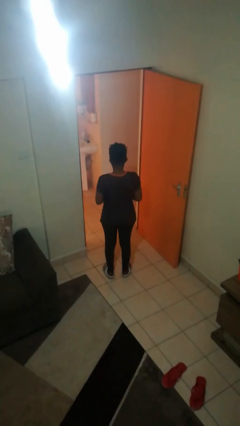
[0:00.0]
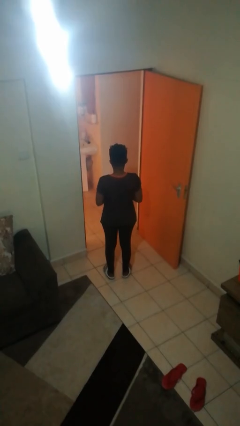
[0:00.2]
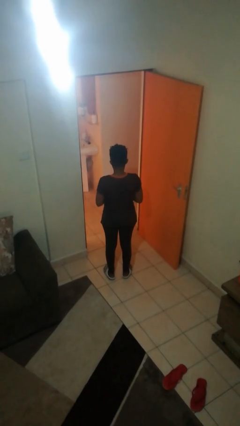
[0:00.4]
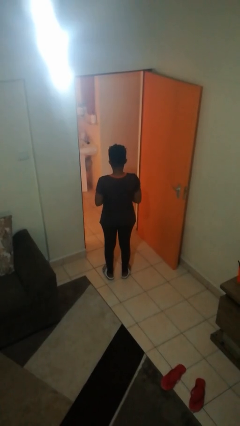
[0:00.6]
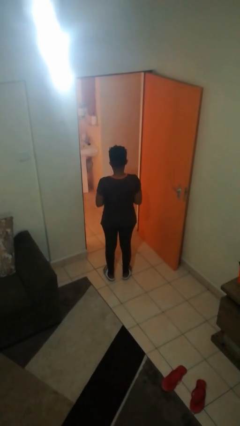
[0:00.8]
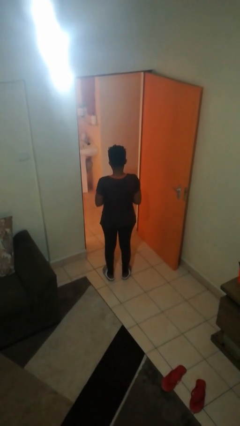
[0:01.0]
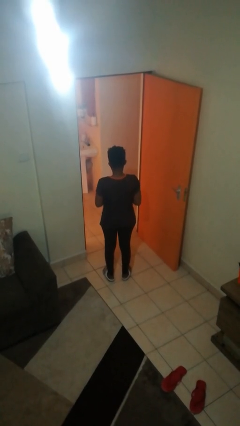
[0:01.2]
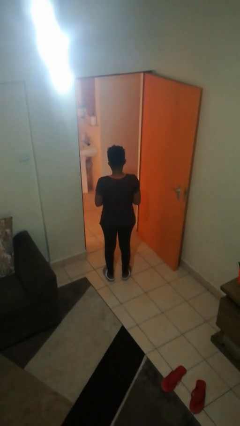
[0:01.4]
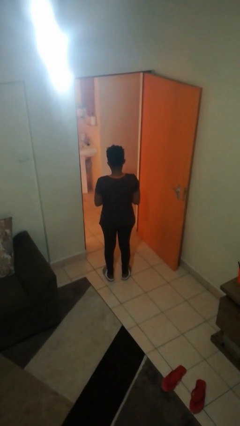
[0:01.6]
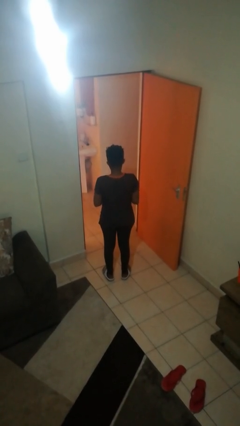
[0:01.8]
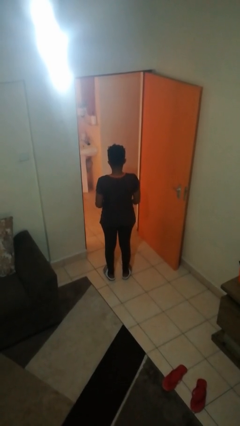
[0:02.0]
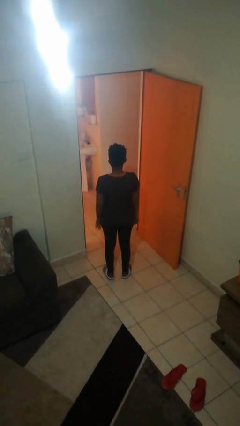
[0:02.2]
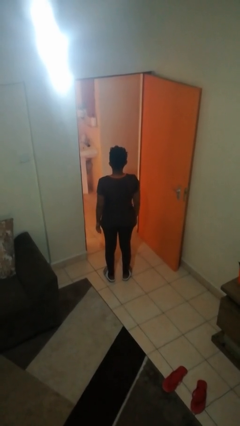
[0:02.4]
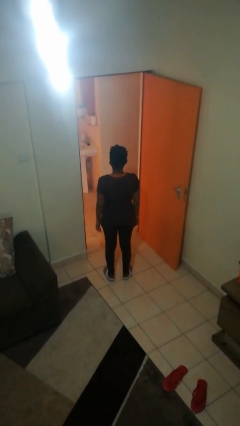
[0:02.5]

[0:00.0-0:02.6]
person takes off ring

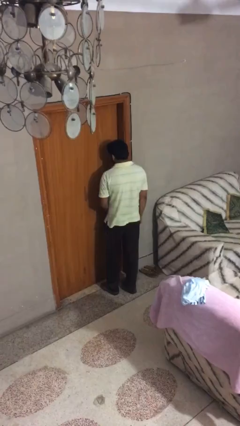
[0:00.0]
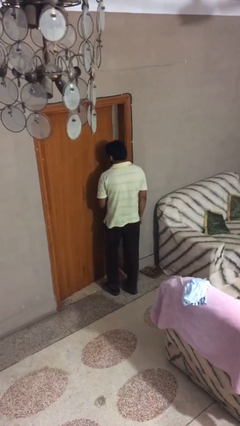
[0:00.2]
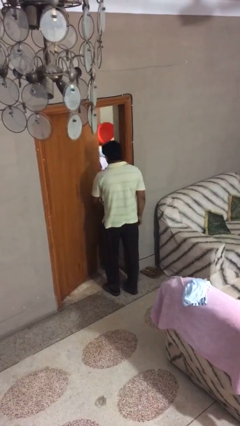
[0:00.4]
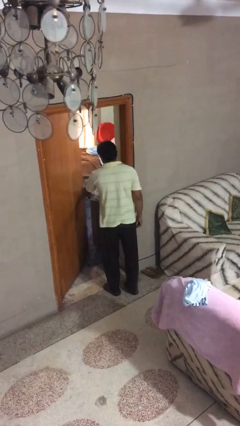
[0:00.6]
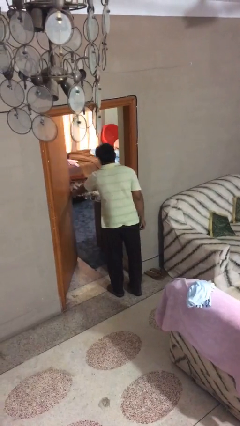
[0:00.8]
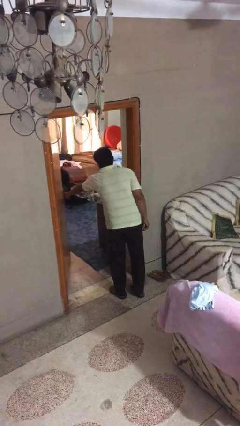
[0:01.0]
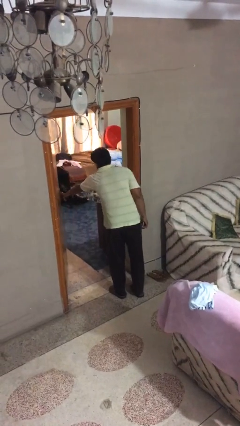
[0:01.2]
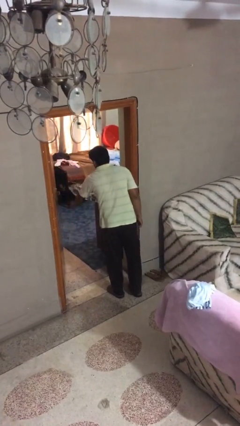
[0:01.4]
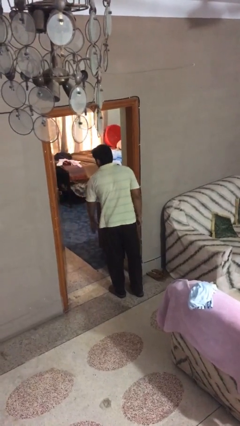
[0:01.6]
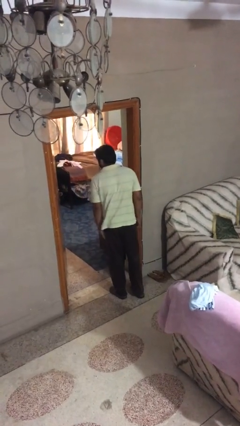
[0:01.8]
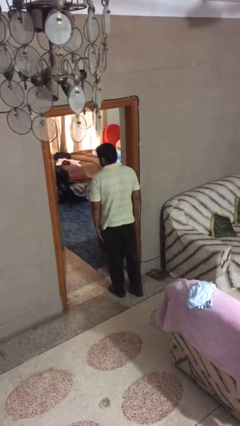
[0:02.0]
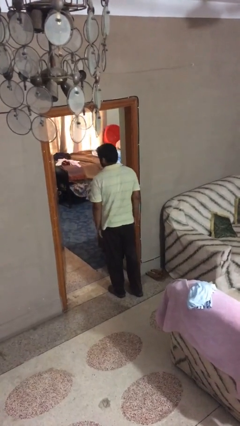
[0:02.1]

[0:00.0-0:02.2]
person opens facility door

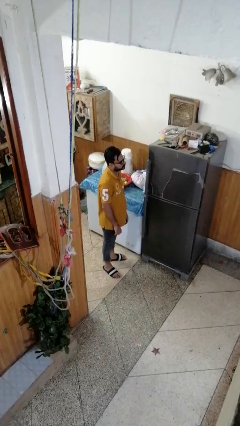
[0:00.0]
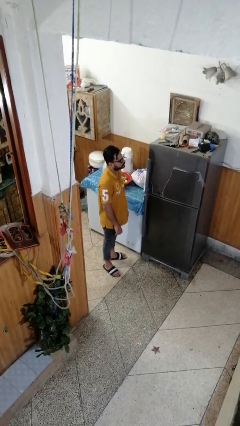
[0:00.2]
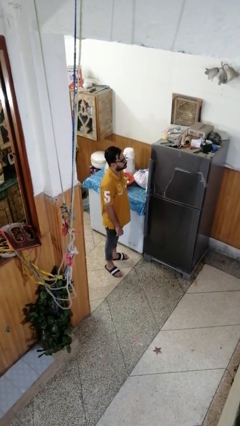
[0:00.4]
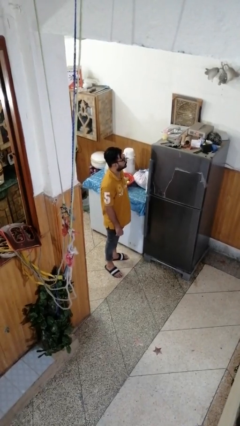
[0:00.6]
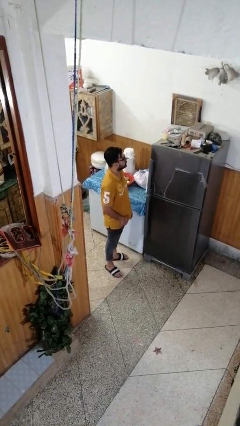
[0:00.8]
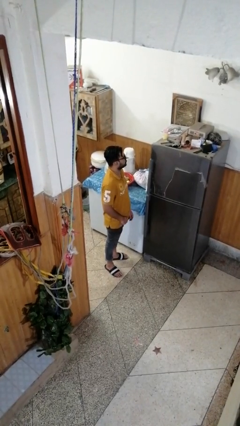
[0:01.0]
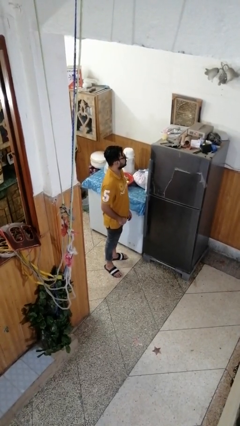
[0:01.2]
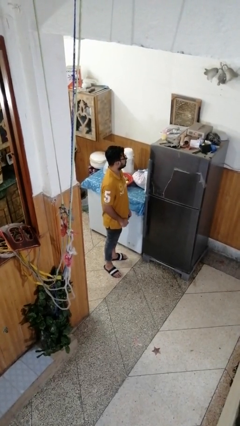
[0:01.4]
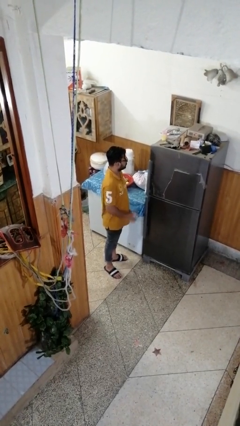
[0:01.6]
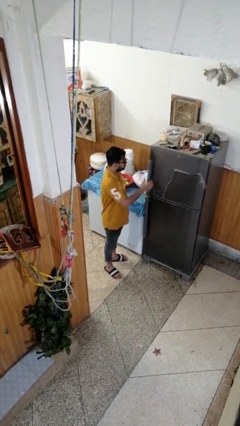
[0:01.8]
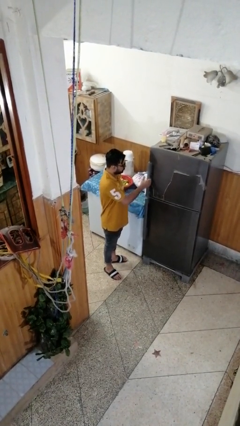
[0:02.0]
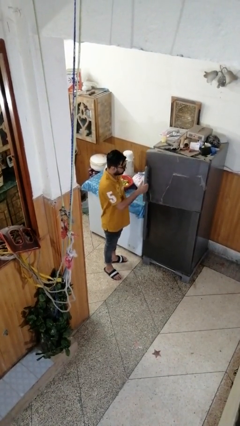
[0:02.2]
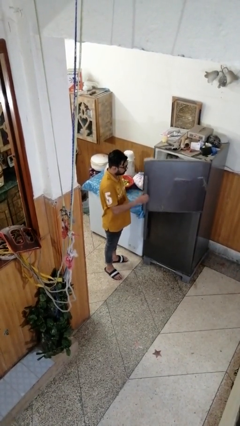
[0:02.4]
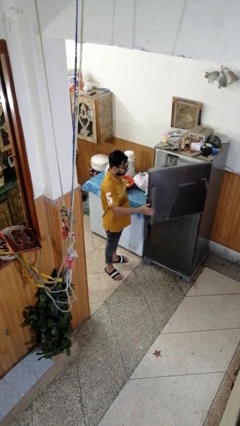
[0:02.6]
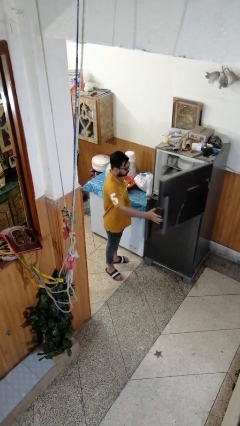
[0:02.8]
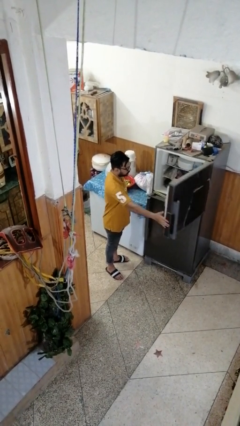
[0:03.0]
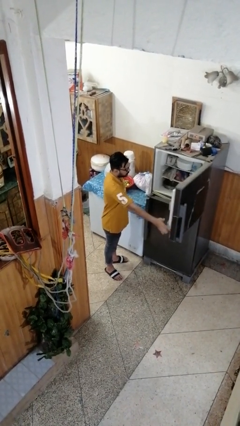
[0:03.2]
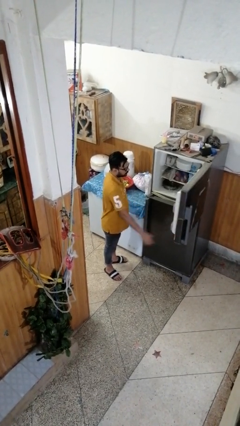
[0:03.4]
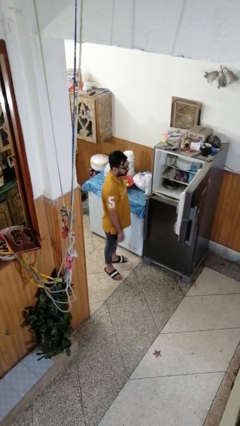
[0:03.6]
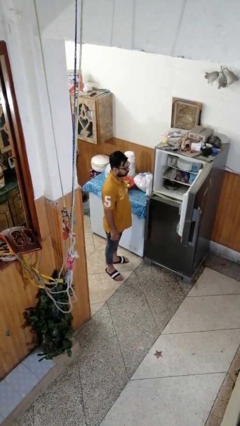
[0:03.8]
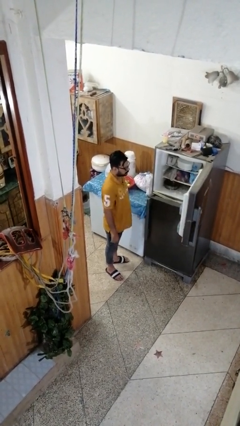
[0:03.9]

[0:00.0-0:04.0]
person opens refrigerator

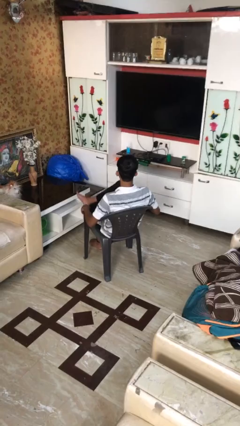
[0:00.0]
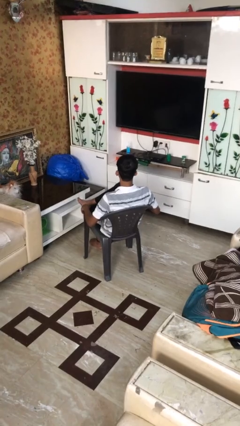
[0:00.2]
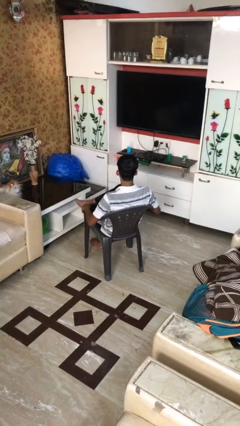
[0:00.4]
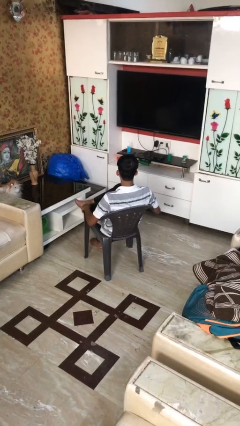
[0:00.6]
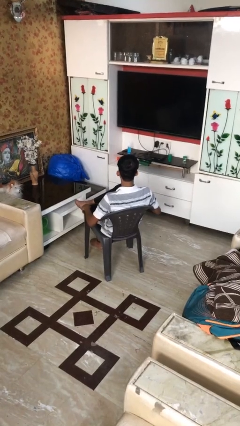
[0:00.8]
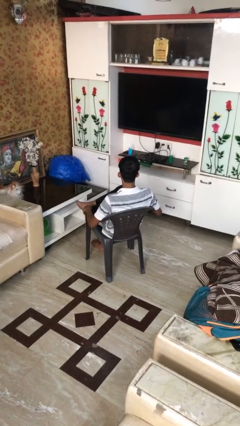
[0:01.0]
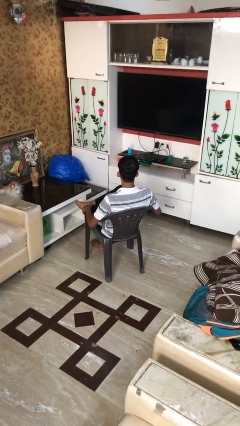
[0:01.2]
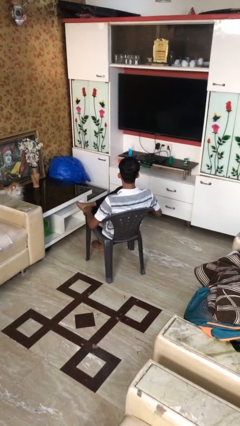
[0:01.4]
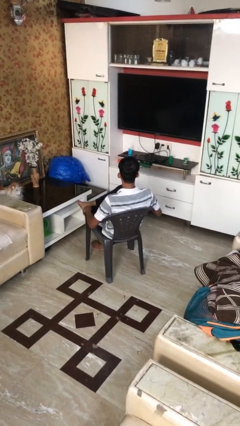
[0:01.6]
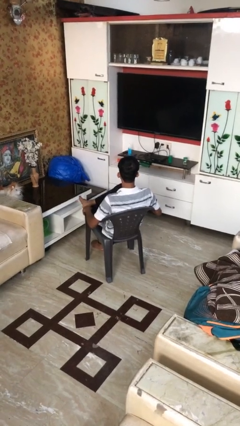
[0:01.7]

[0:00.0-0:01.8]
person crosses legs

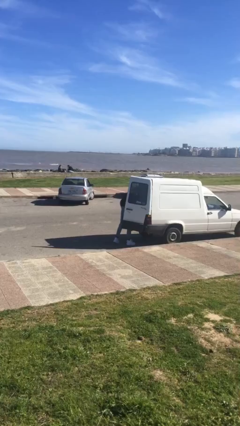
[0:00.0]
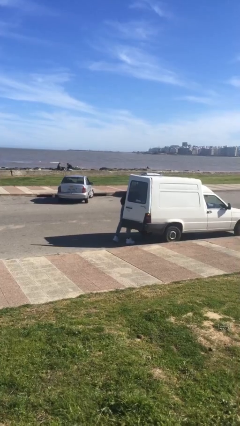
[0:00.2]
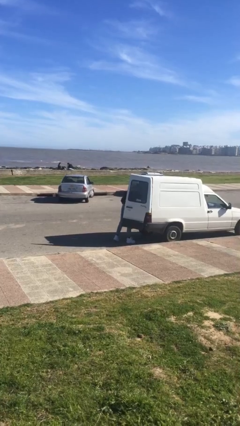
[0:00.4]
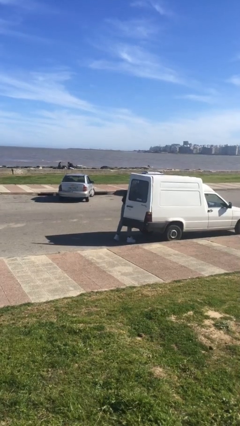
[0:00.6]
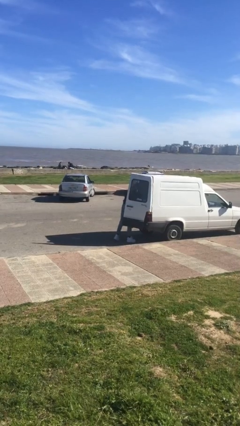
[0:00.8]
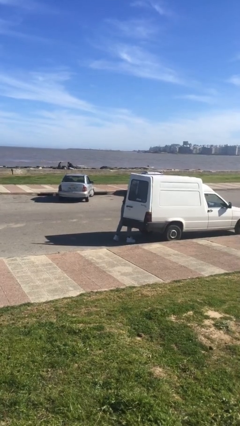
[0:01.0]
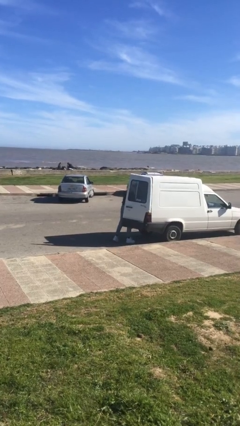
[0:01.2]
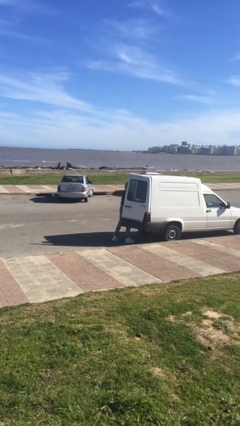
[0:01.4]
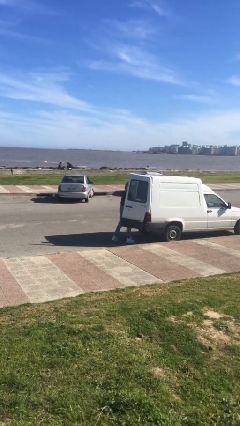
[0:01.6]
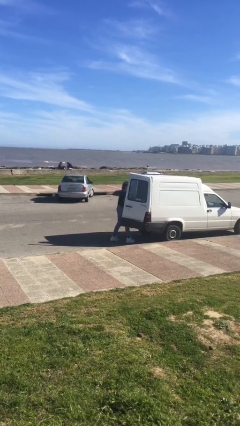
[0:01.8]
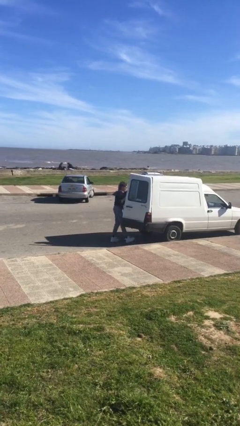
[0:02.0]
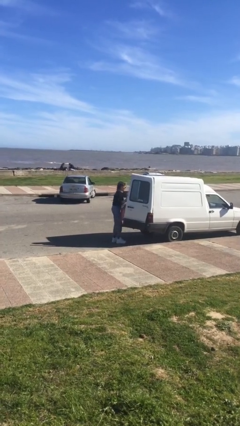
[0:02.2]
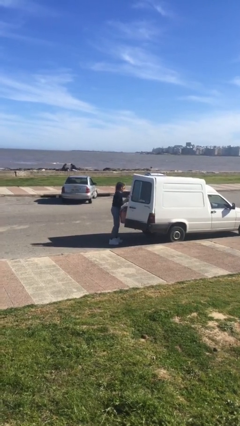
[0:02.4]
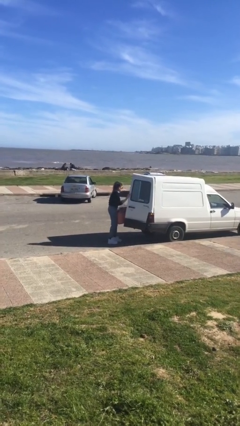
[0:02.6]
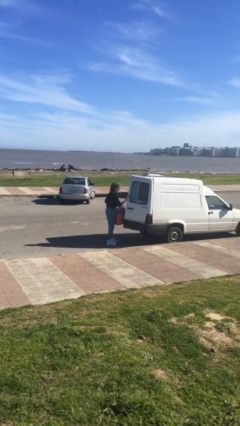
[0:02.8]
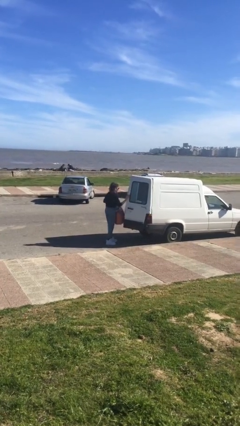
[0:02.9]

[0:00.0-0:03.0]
person unloads car

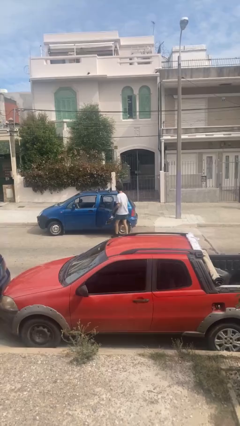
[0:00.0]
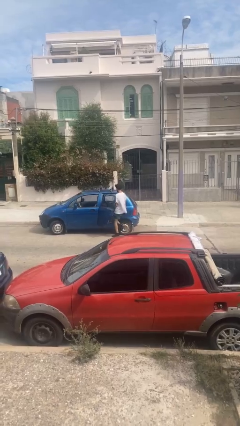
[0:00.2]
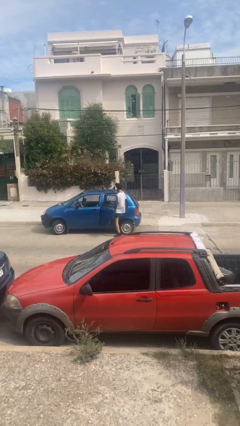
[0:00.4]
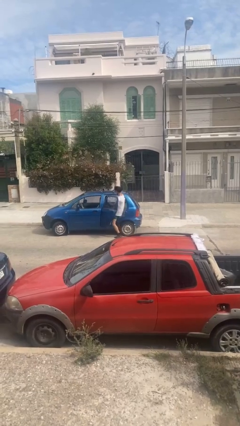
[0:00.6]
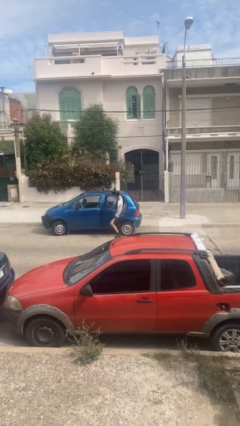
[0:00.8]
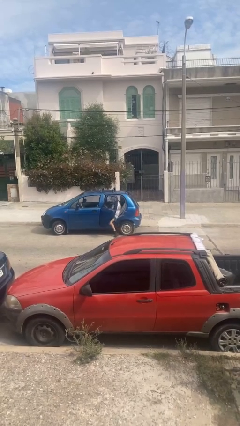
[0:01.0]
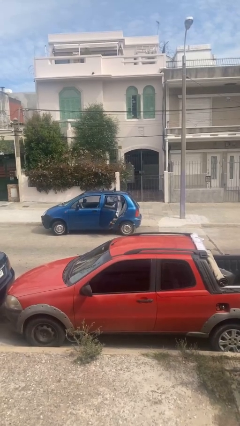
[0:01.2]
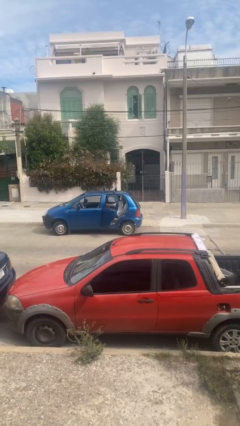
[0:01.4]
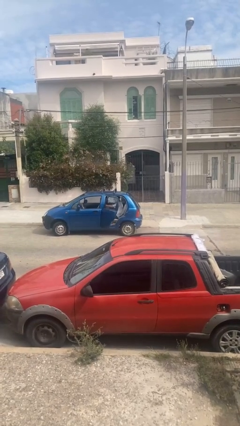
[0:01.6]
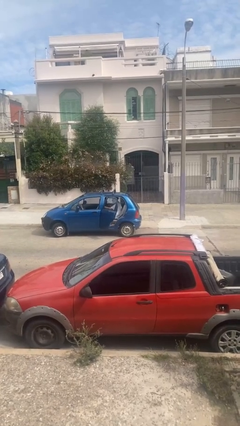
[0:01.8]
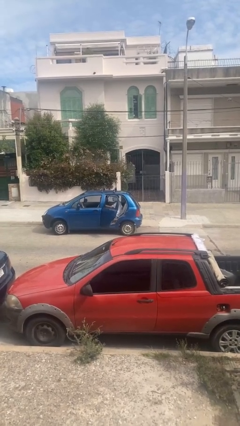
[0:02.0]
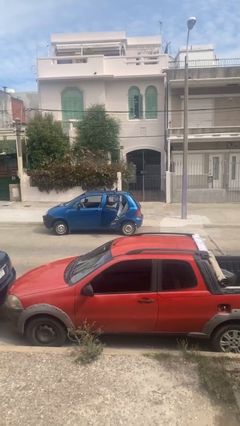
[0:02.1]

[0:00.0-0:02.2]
person enters car

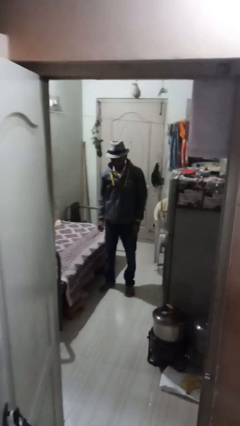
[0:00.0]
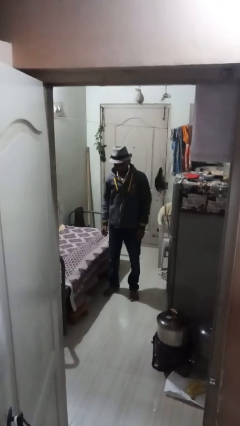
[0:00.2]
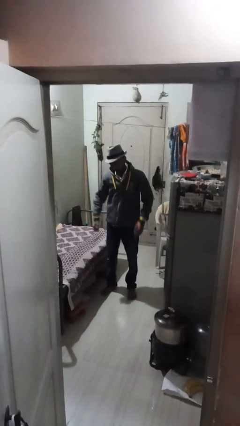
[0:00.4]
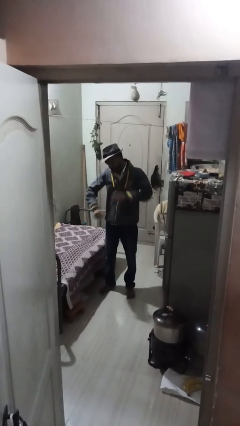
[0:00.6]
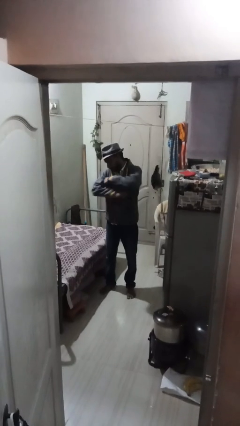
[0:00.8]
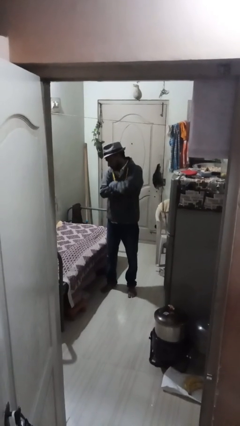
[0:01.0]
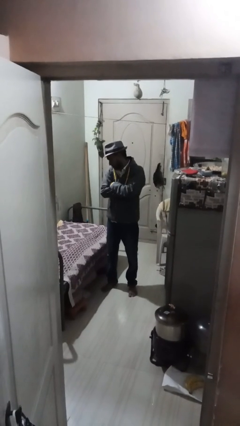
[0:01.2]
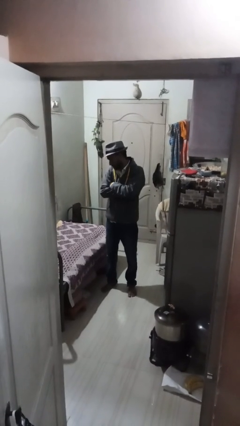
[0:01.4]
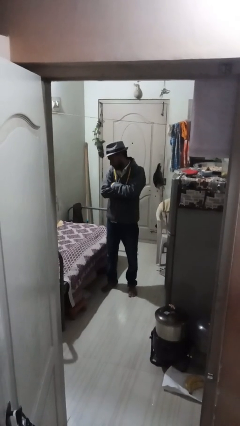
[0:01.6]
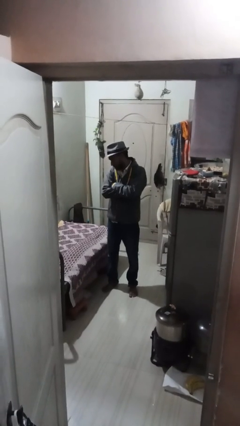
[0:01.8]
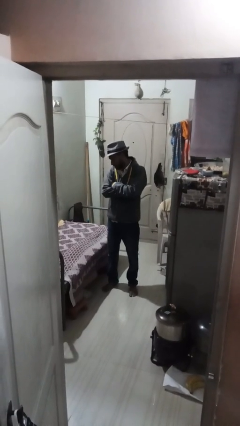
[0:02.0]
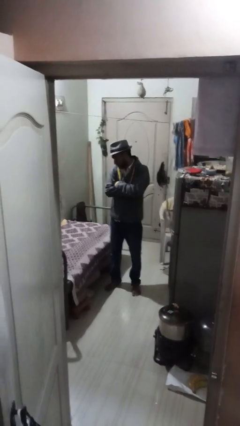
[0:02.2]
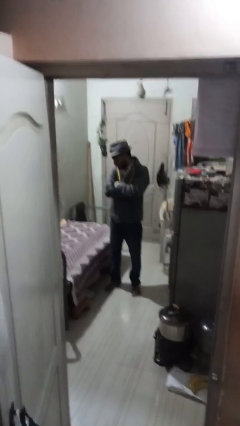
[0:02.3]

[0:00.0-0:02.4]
person crosses arms
